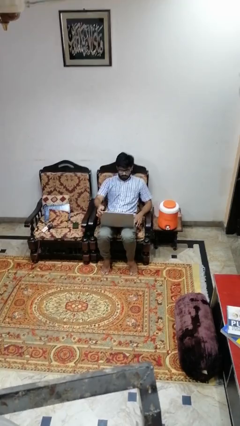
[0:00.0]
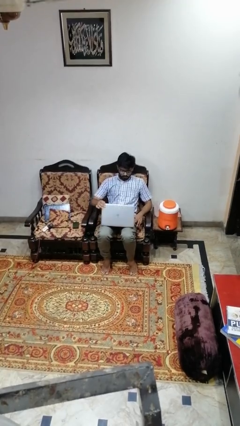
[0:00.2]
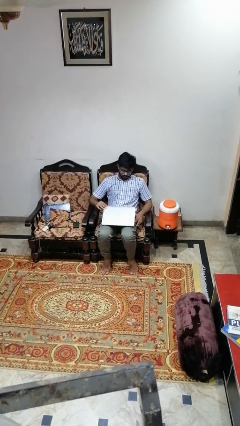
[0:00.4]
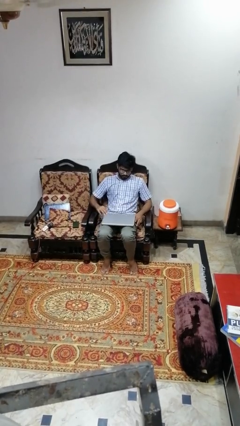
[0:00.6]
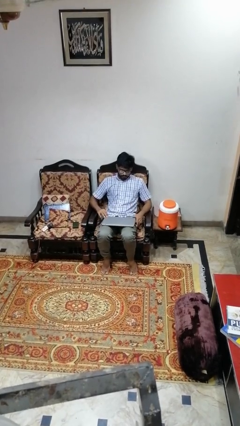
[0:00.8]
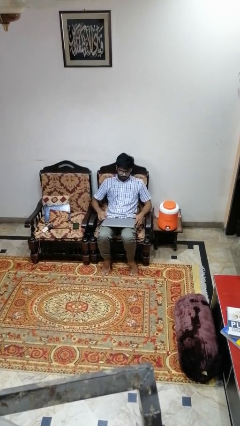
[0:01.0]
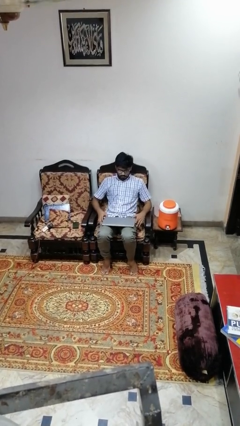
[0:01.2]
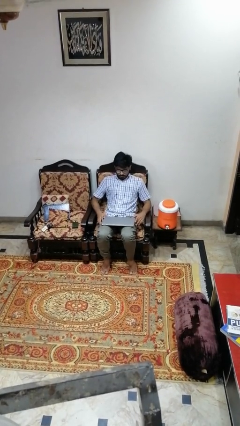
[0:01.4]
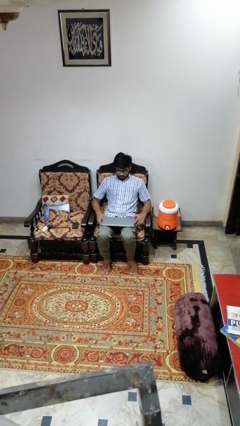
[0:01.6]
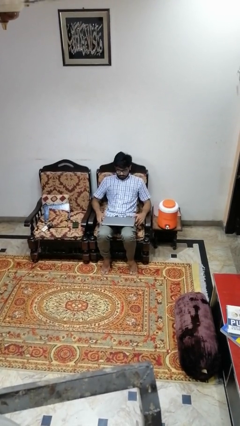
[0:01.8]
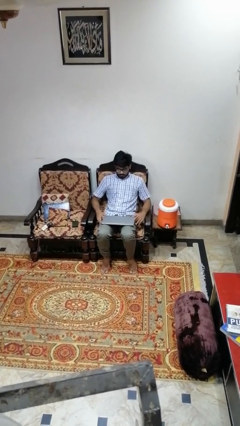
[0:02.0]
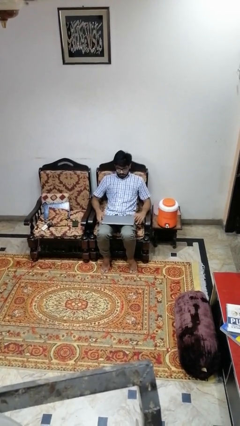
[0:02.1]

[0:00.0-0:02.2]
person closes laptop

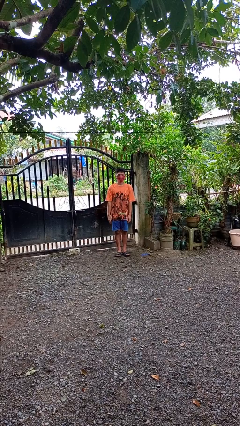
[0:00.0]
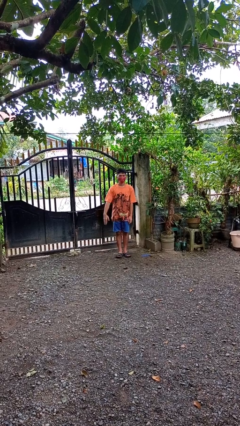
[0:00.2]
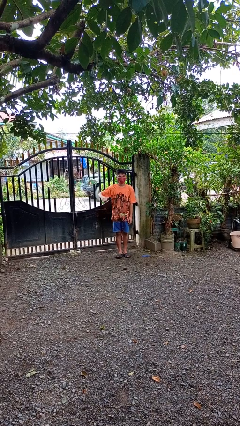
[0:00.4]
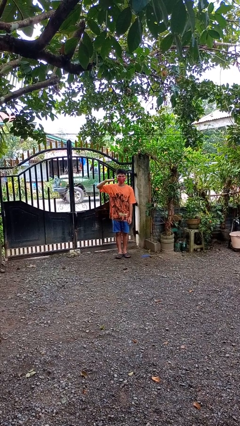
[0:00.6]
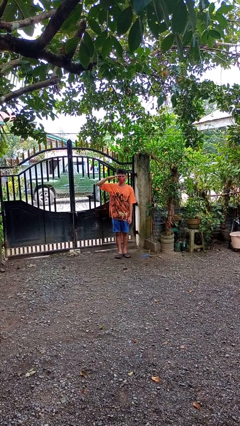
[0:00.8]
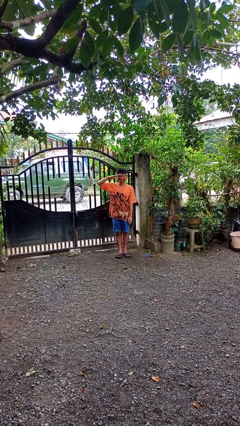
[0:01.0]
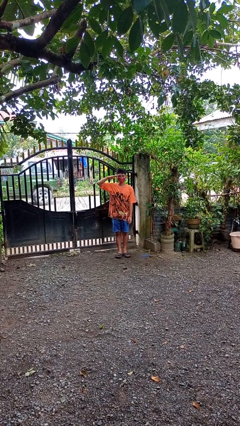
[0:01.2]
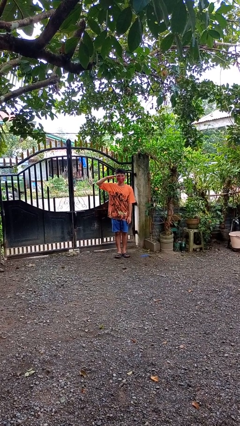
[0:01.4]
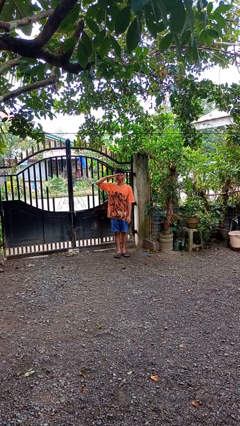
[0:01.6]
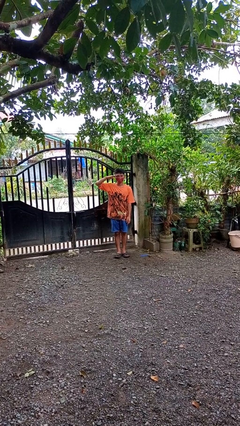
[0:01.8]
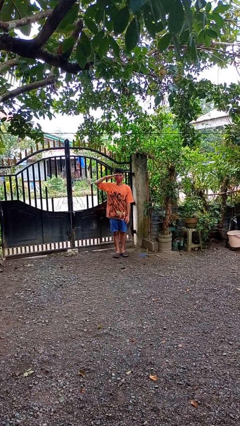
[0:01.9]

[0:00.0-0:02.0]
person salutes

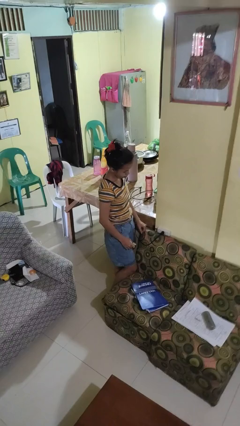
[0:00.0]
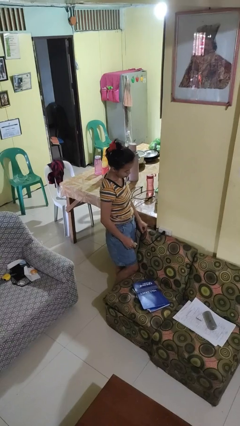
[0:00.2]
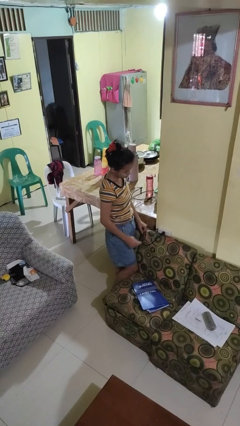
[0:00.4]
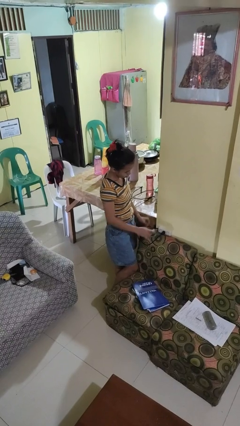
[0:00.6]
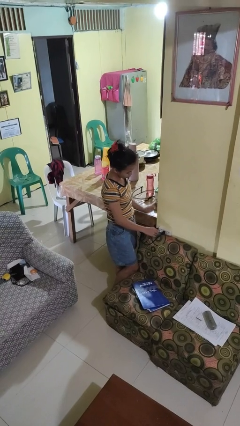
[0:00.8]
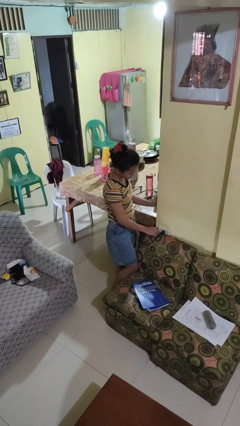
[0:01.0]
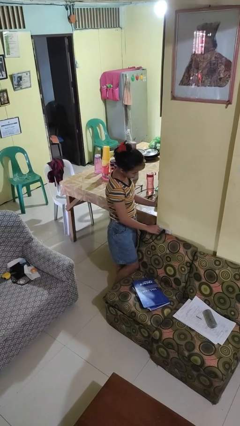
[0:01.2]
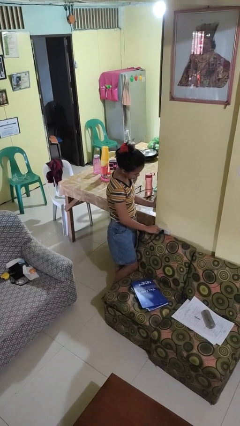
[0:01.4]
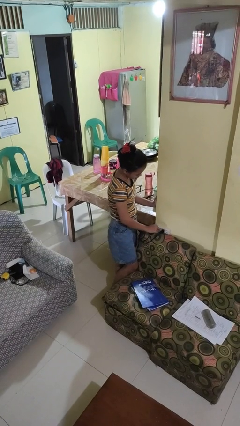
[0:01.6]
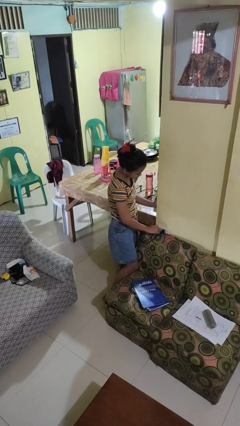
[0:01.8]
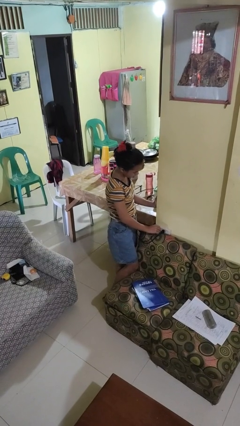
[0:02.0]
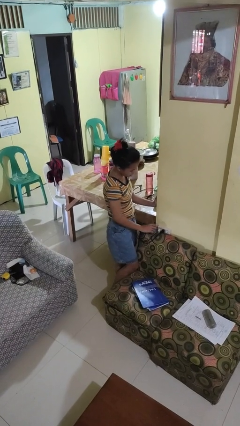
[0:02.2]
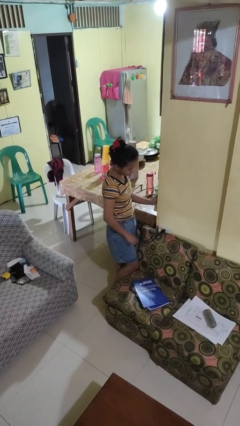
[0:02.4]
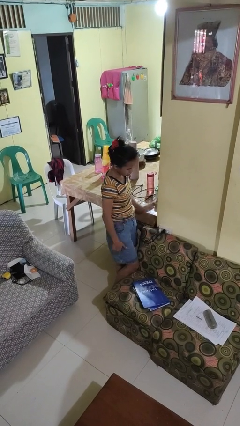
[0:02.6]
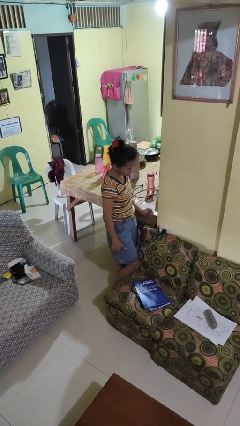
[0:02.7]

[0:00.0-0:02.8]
person plugs into electrical socket

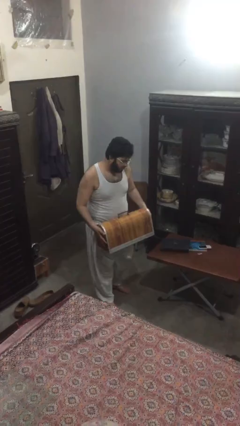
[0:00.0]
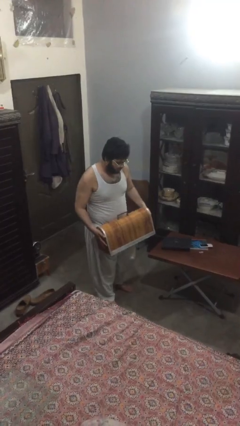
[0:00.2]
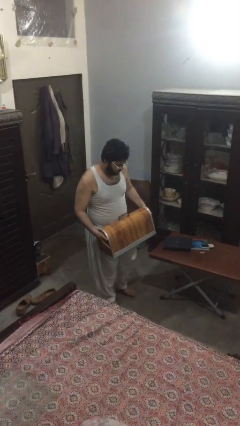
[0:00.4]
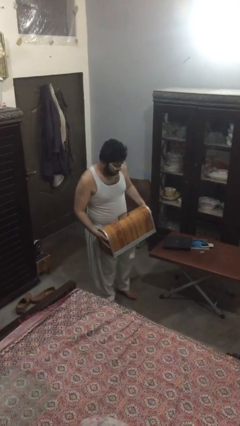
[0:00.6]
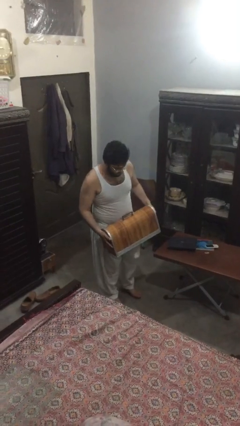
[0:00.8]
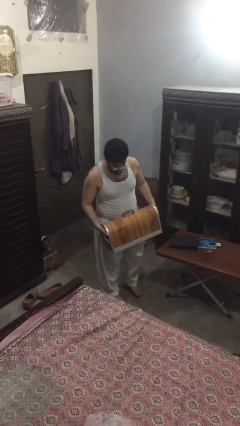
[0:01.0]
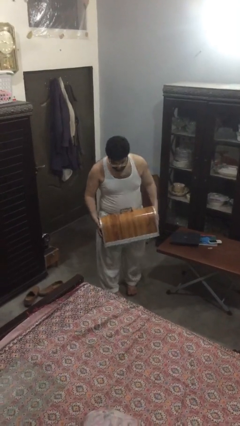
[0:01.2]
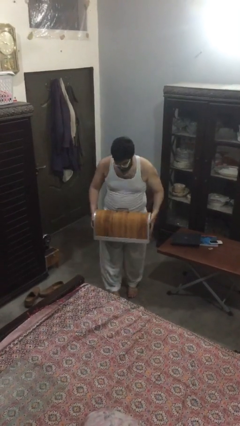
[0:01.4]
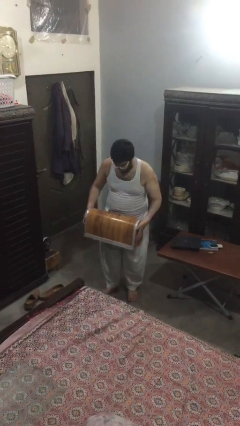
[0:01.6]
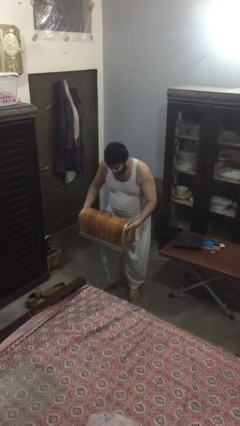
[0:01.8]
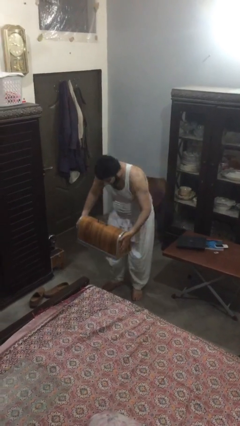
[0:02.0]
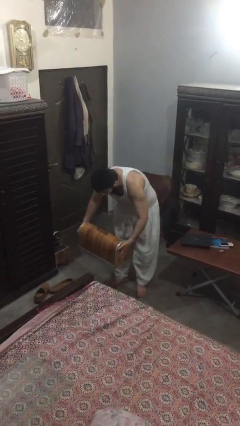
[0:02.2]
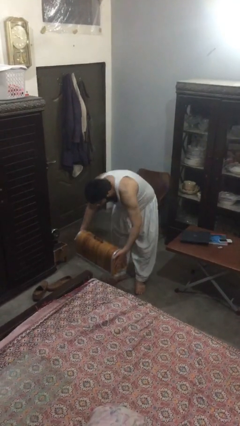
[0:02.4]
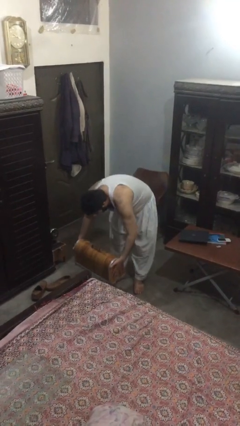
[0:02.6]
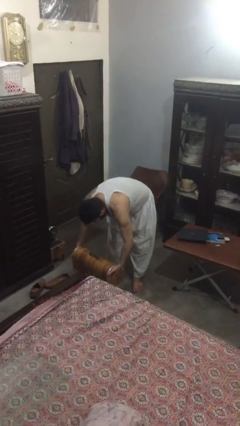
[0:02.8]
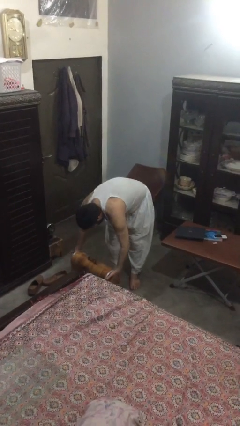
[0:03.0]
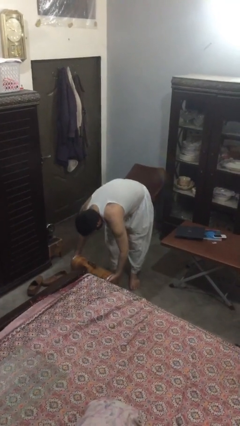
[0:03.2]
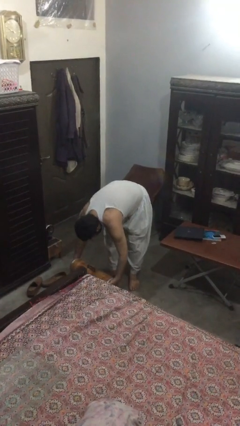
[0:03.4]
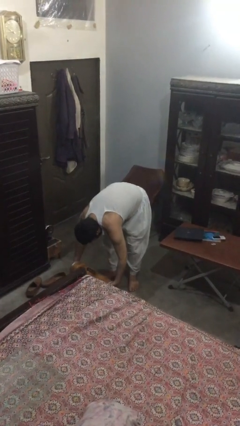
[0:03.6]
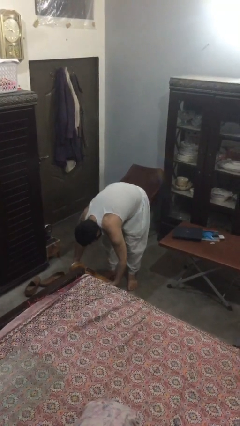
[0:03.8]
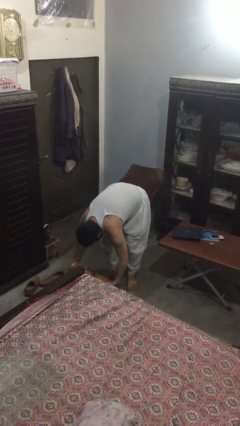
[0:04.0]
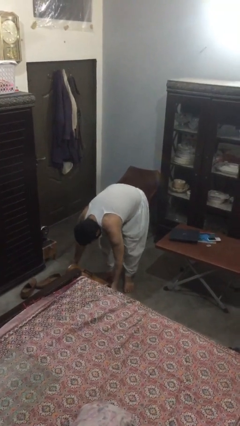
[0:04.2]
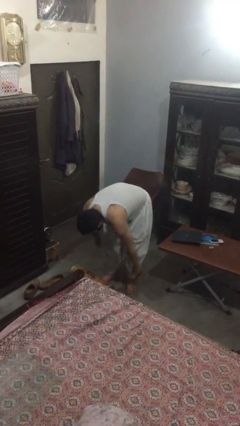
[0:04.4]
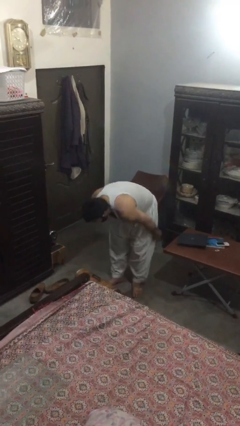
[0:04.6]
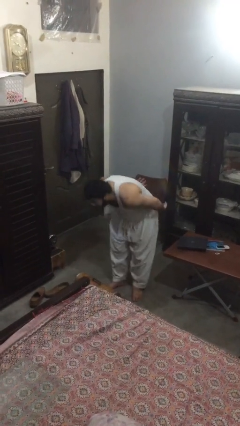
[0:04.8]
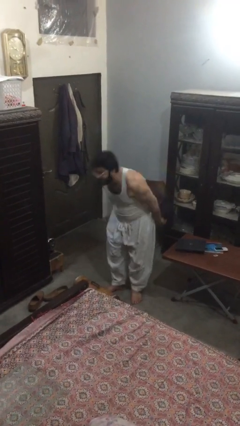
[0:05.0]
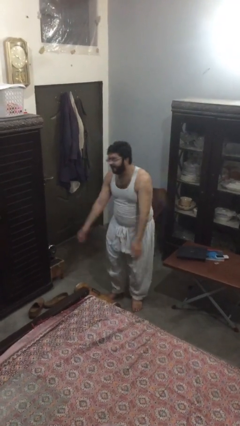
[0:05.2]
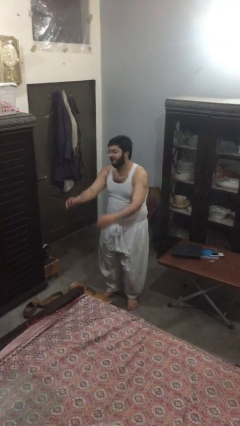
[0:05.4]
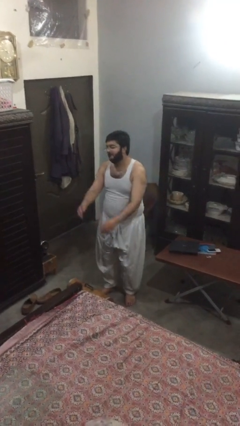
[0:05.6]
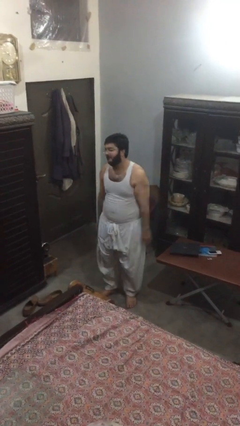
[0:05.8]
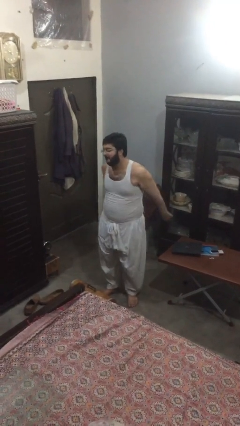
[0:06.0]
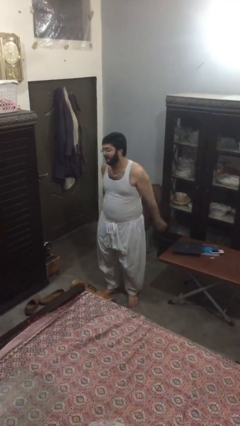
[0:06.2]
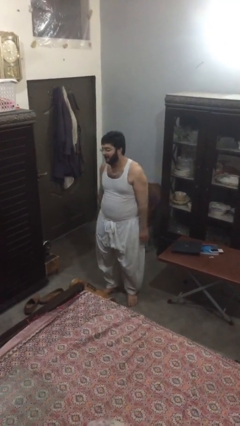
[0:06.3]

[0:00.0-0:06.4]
person puts down object on floor

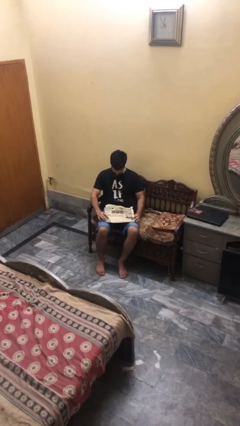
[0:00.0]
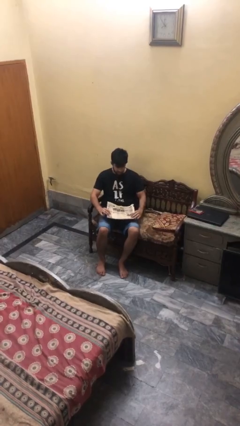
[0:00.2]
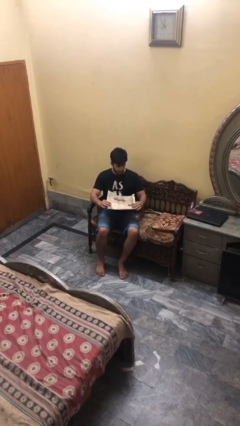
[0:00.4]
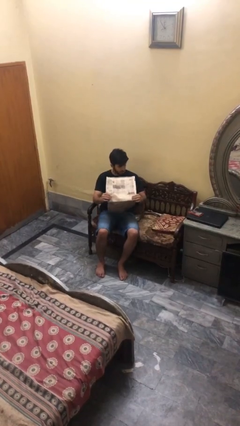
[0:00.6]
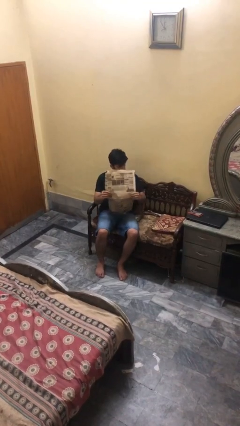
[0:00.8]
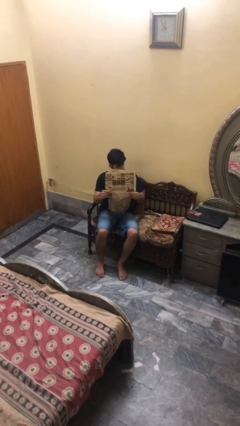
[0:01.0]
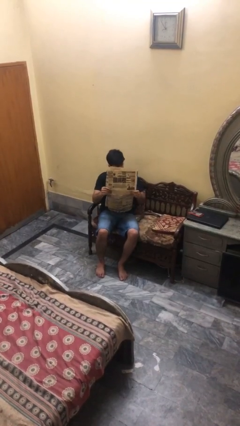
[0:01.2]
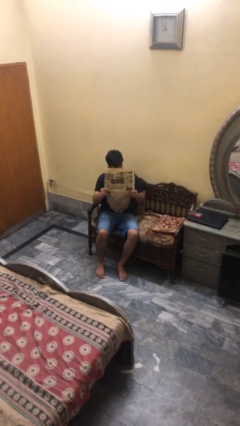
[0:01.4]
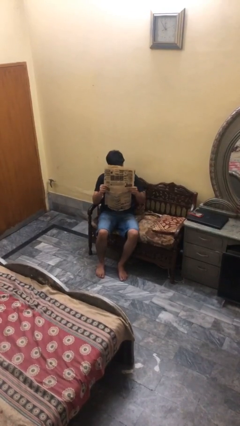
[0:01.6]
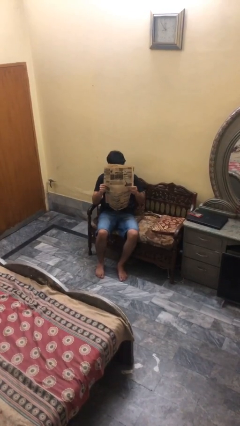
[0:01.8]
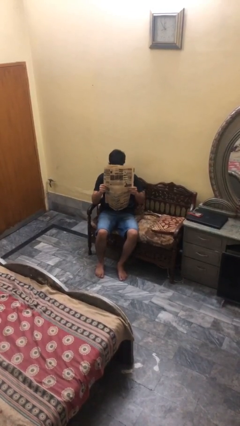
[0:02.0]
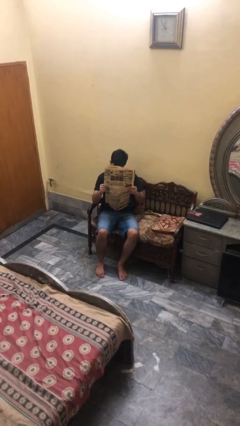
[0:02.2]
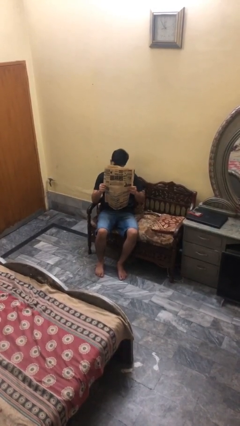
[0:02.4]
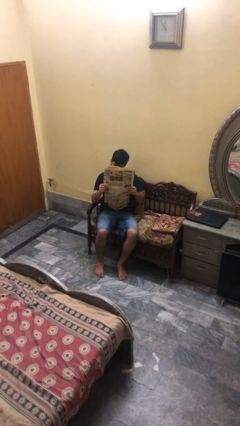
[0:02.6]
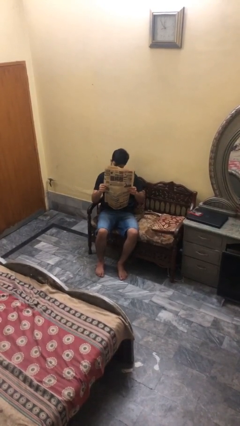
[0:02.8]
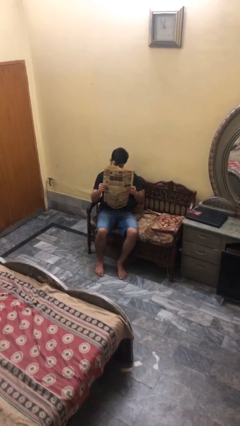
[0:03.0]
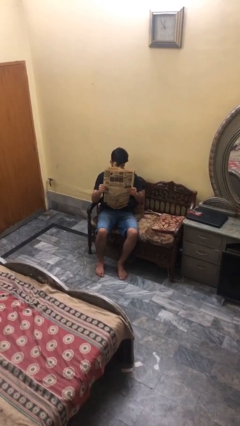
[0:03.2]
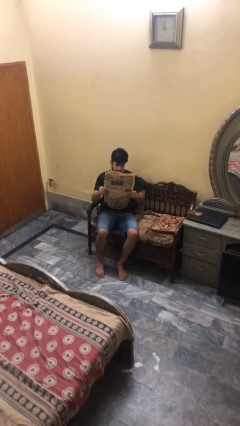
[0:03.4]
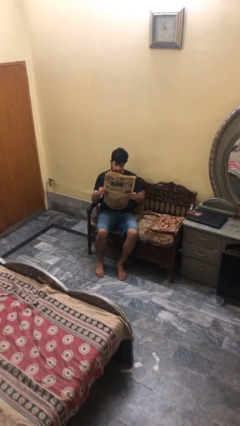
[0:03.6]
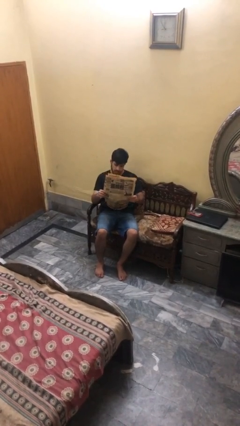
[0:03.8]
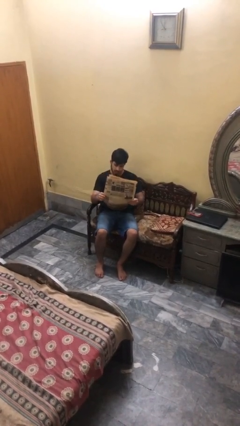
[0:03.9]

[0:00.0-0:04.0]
person reads newspaper
